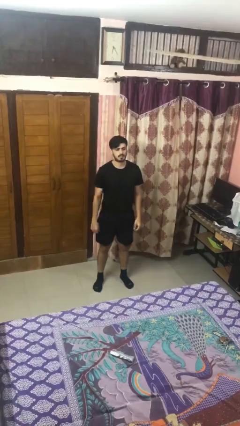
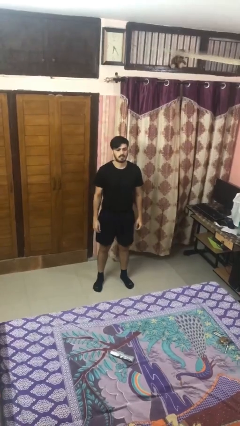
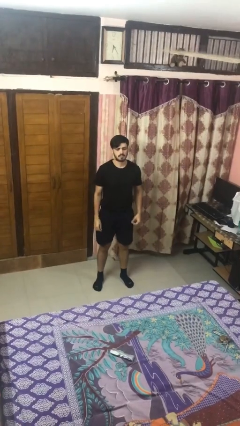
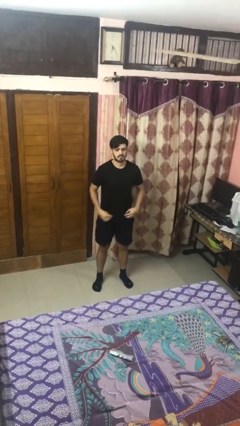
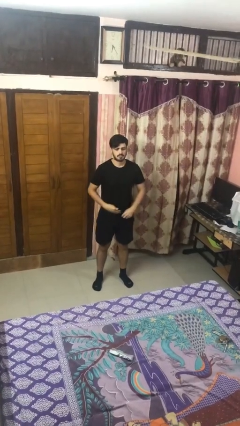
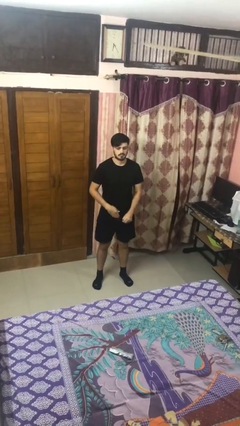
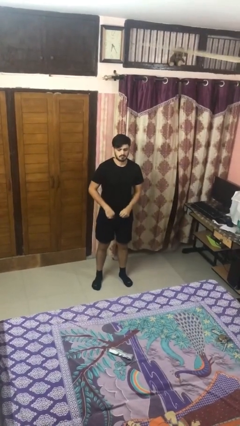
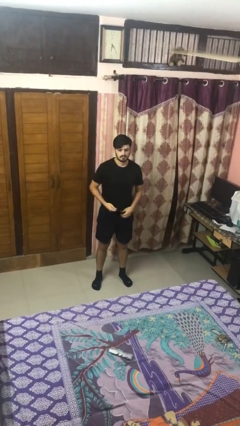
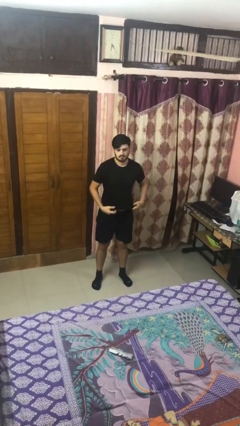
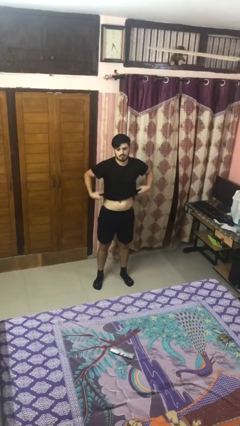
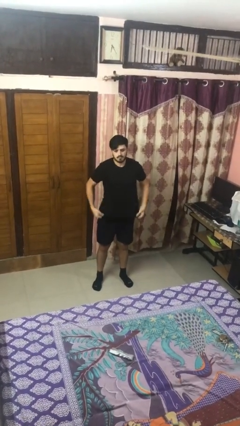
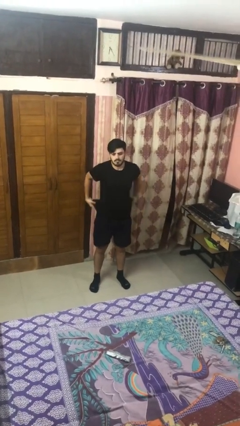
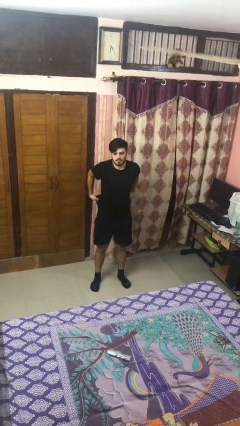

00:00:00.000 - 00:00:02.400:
person untucks shirt

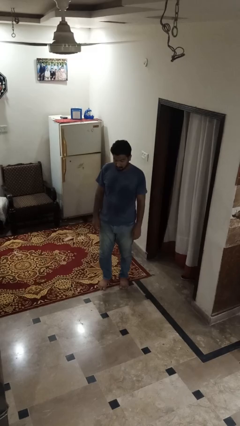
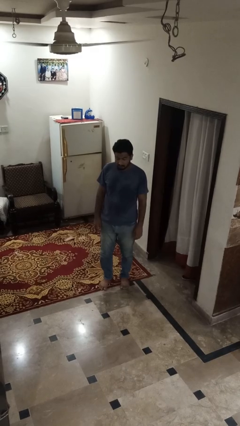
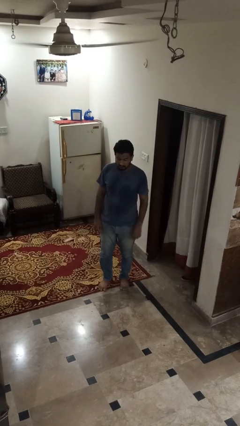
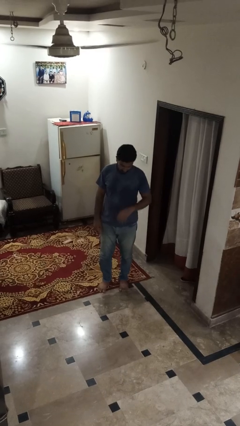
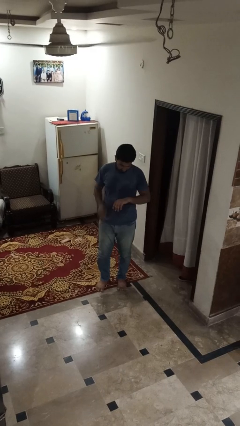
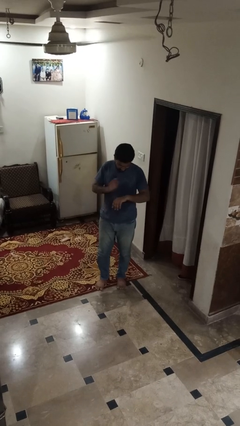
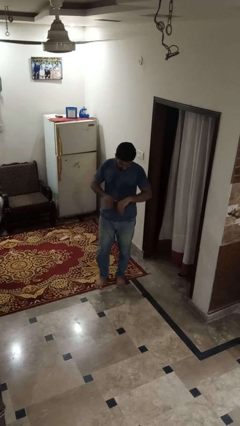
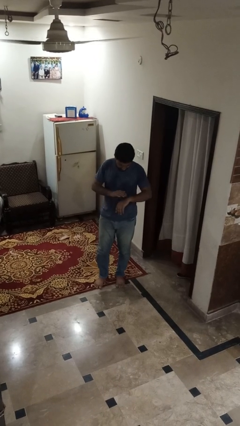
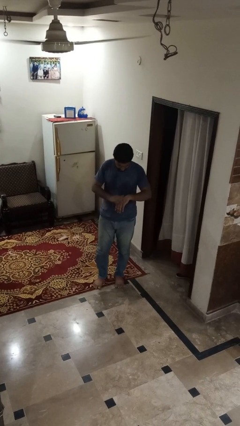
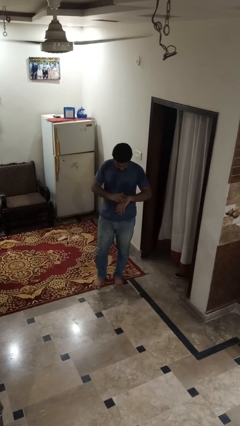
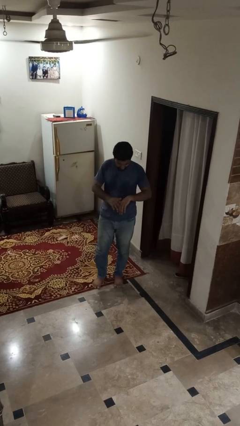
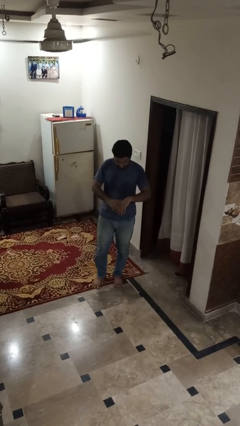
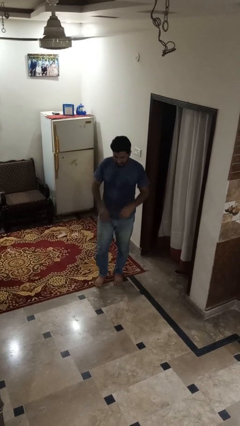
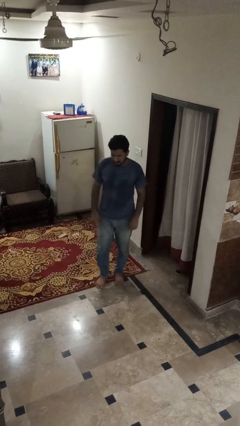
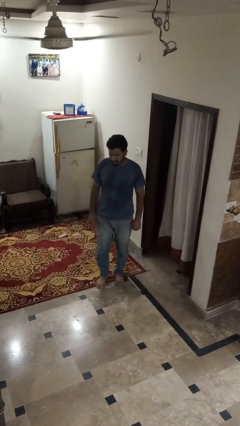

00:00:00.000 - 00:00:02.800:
person swats bug

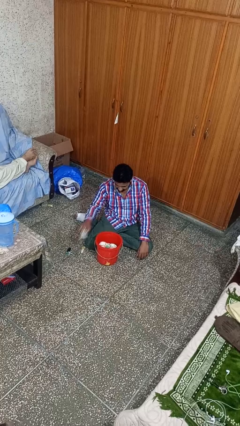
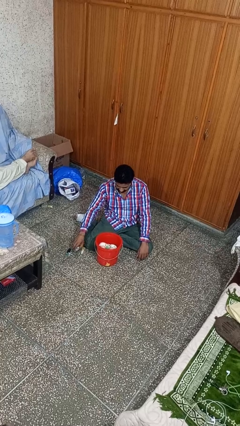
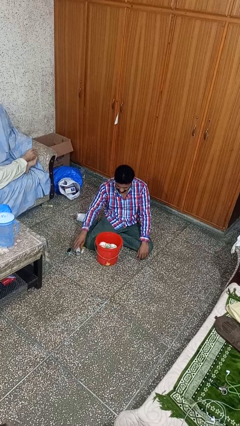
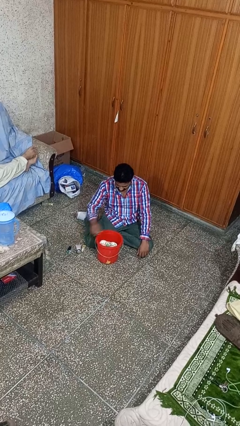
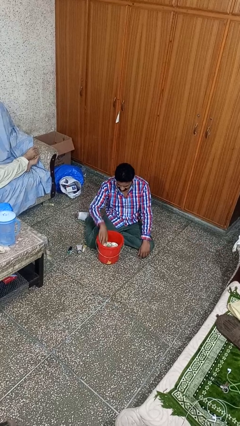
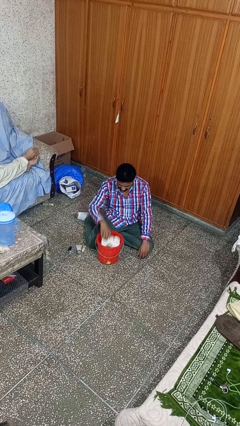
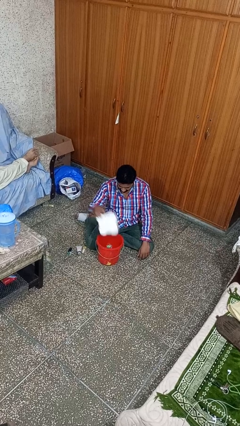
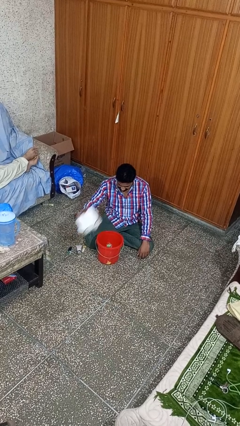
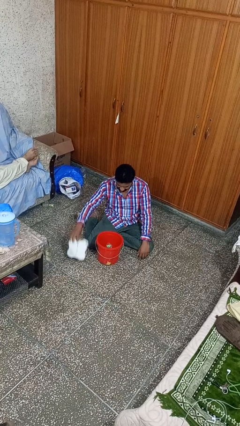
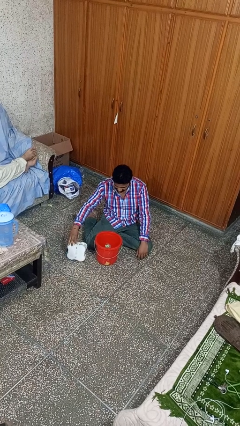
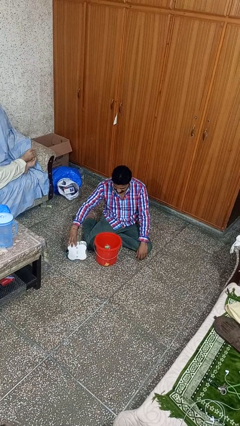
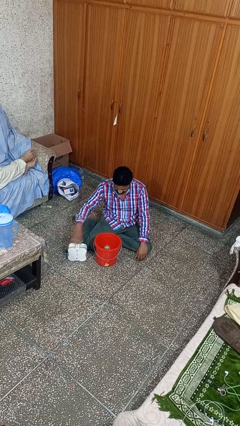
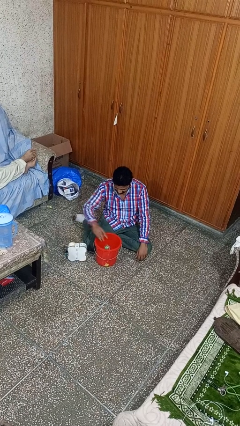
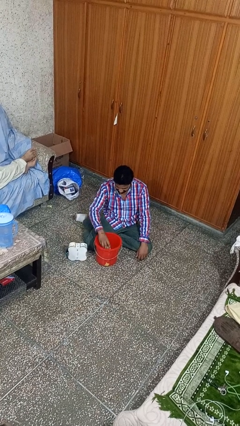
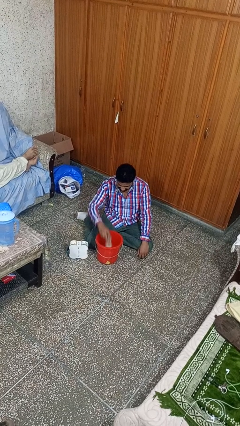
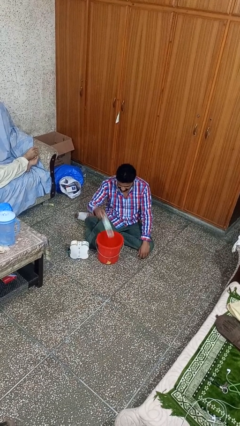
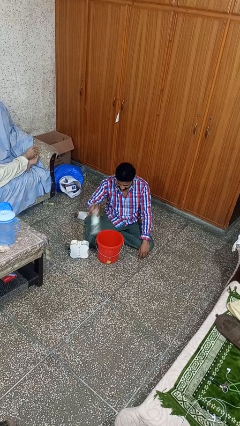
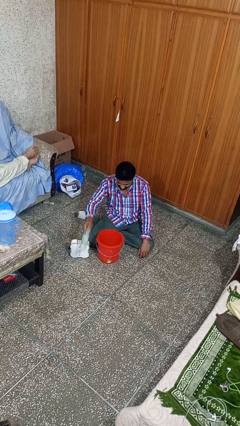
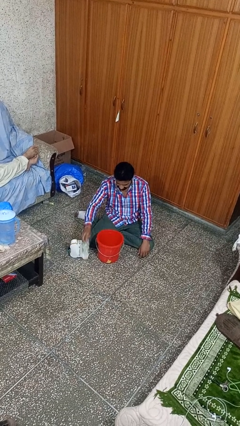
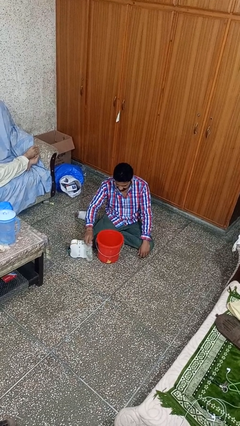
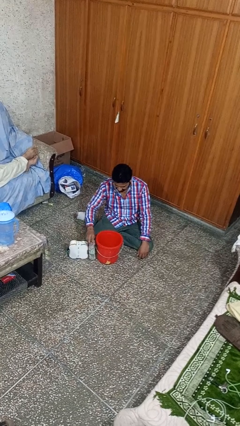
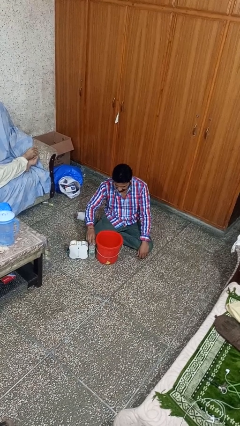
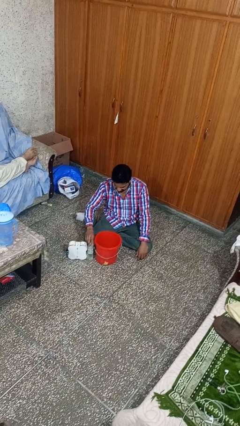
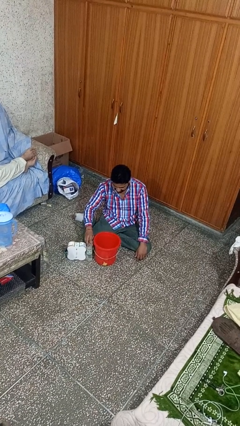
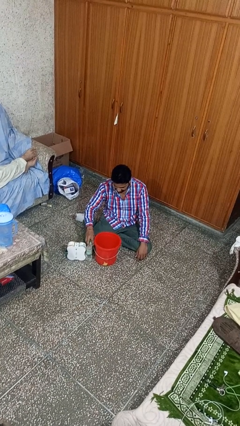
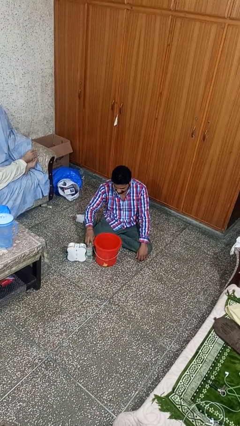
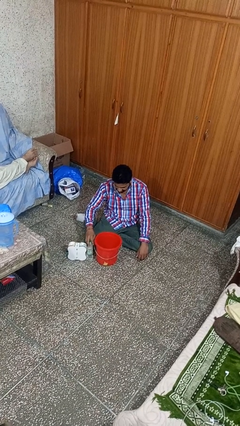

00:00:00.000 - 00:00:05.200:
person takes object from basket

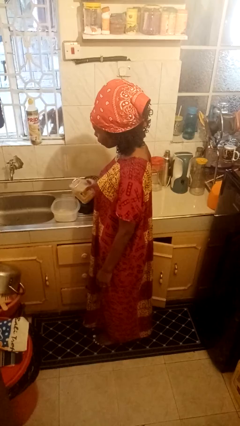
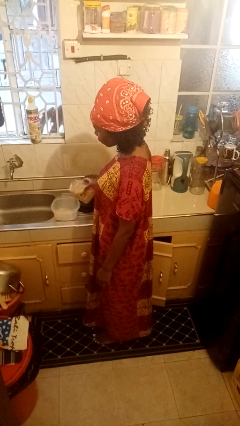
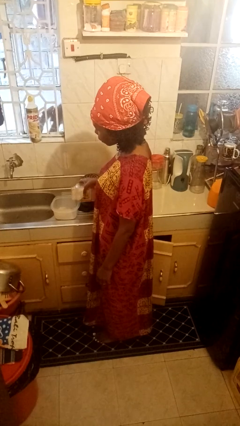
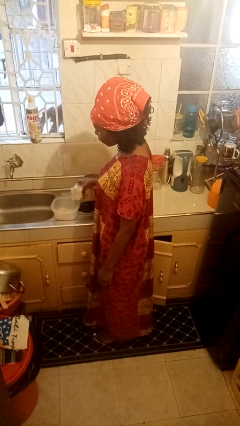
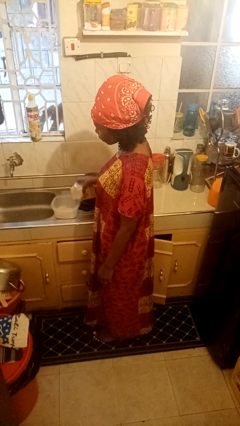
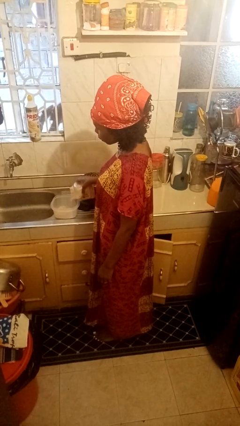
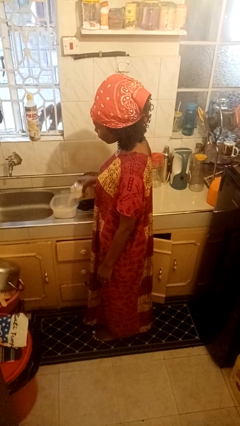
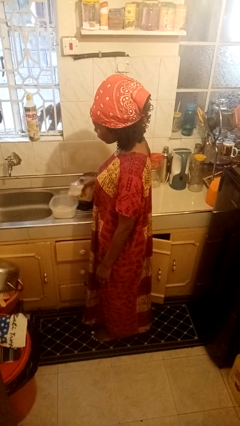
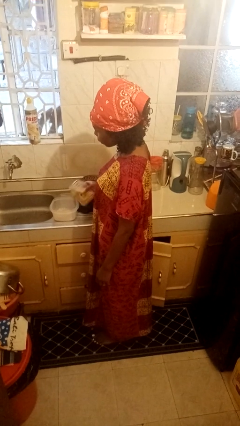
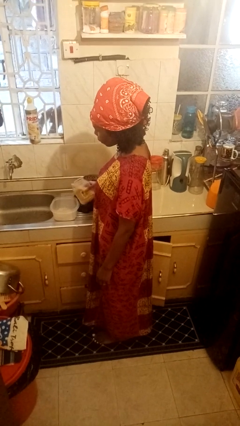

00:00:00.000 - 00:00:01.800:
person pours into bowl

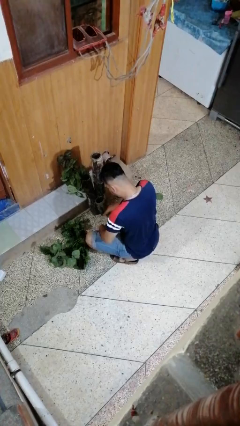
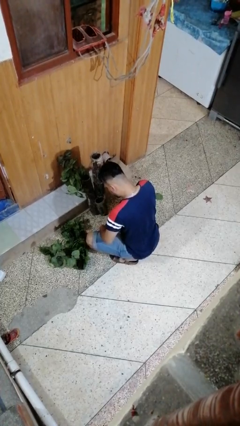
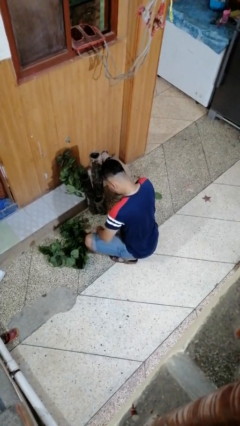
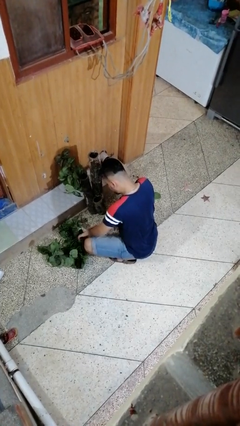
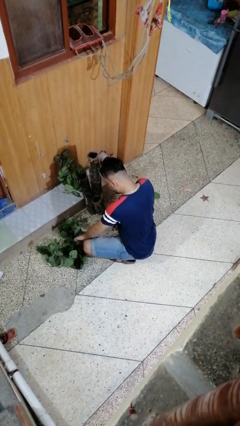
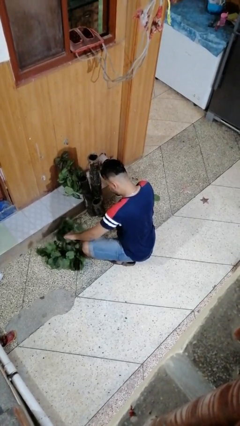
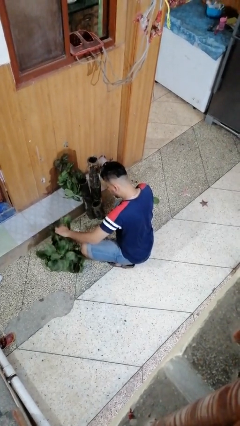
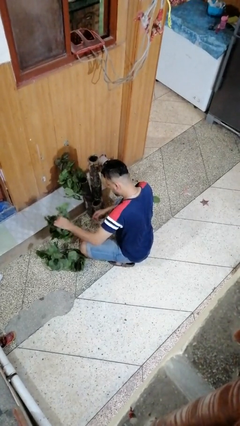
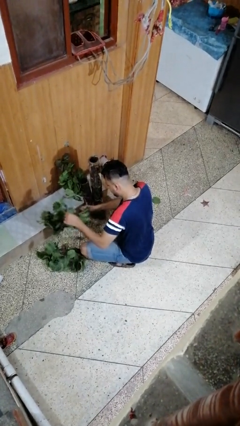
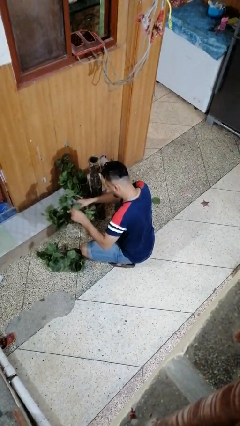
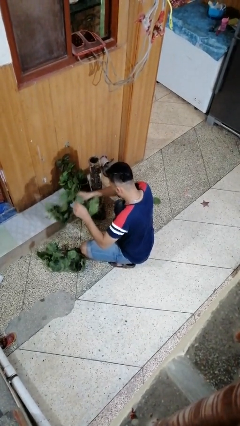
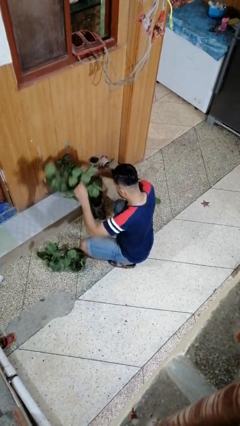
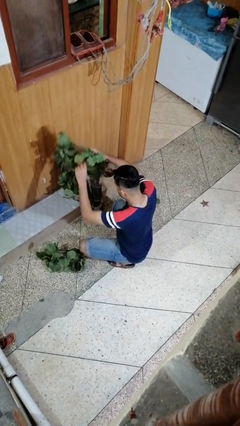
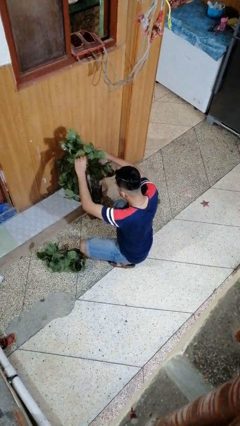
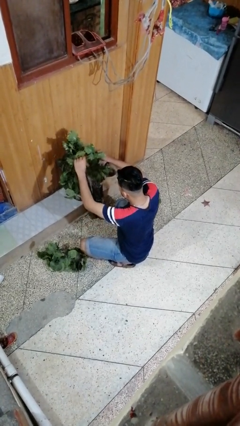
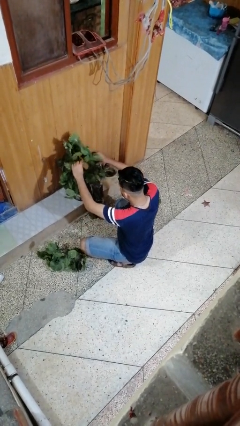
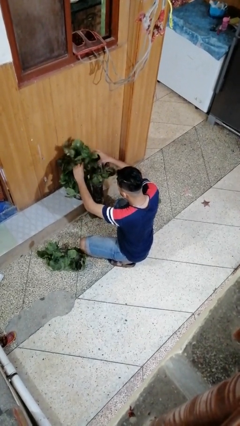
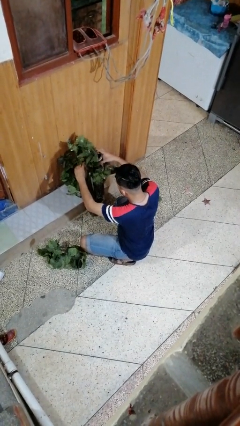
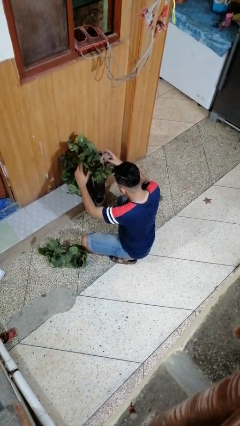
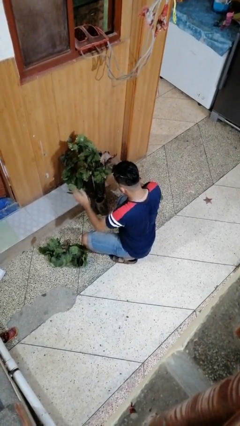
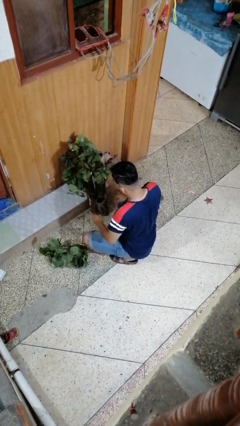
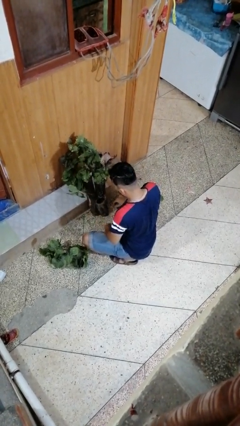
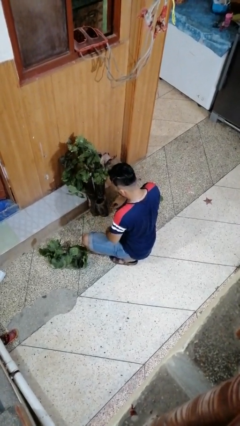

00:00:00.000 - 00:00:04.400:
person arranges flowers in vase

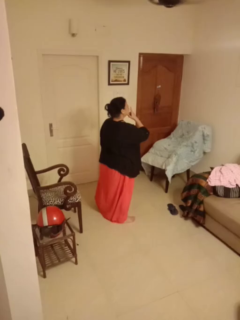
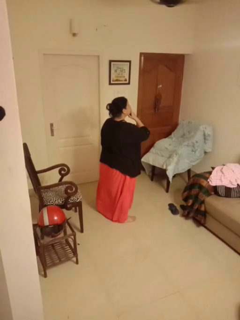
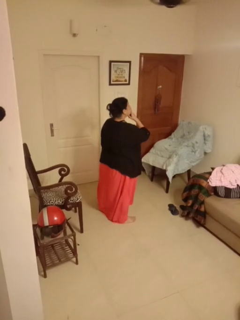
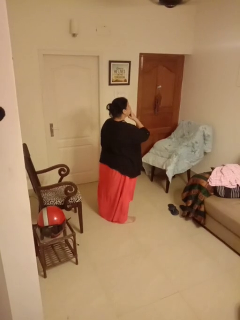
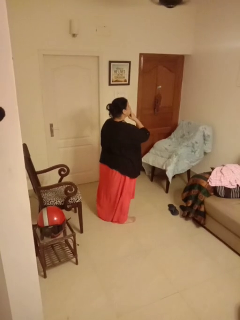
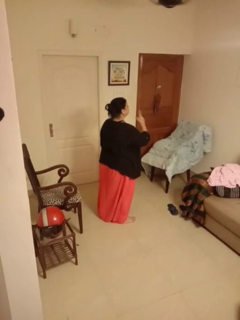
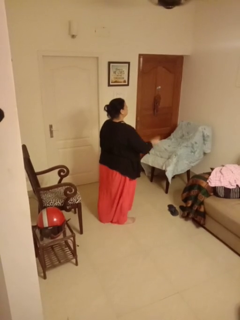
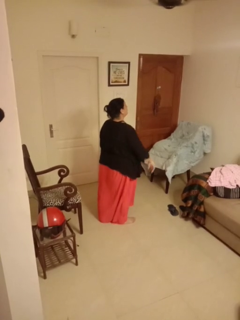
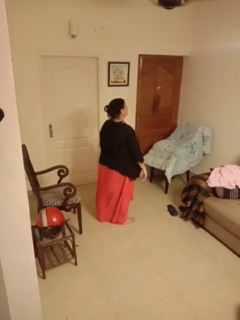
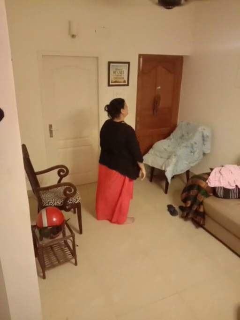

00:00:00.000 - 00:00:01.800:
person gestures be quiet
